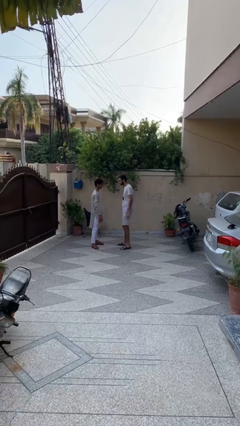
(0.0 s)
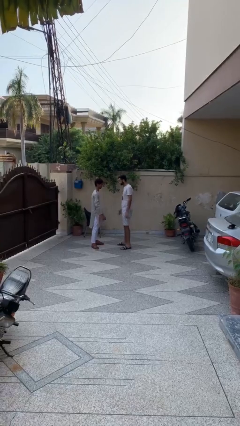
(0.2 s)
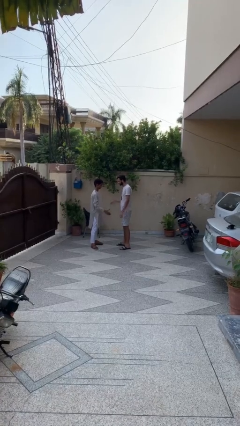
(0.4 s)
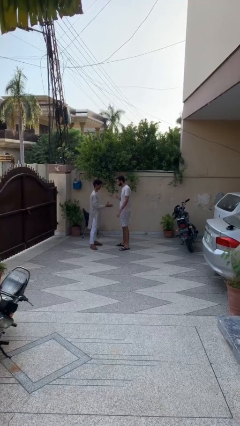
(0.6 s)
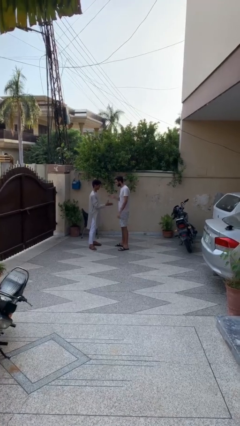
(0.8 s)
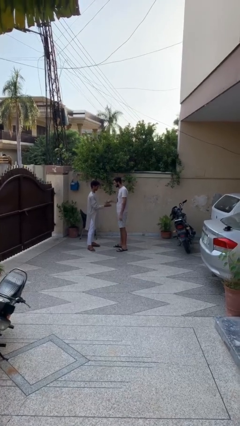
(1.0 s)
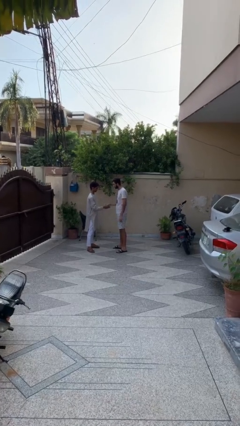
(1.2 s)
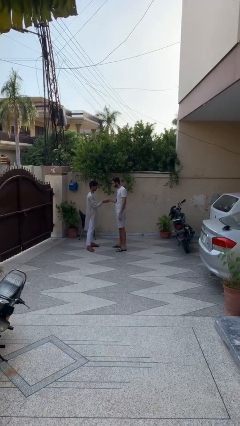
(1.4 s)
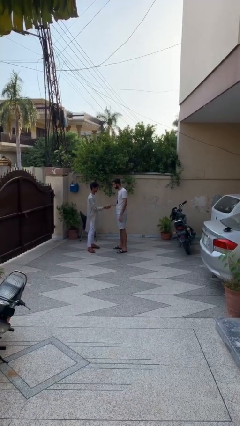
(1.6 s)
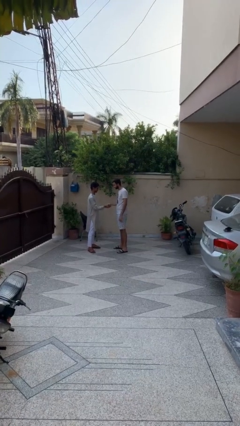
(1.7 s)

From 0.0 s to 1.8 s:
person shakes hand

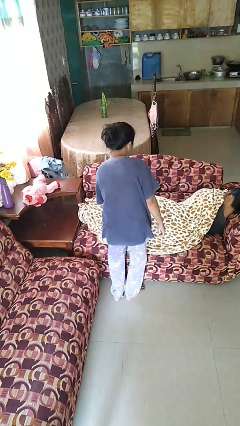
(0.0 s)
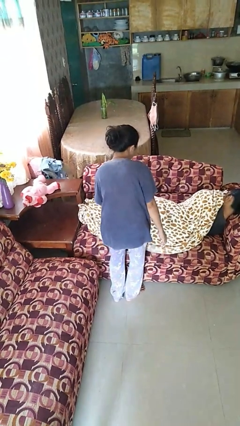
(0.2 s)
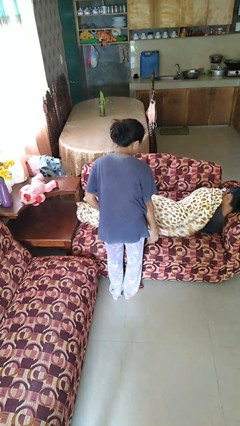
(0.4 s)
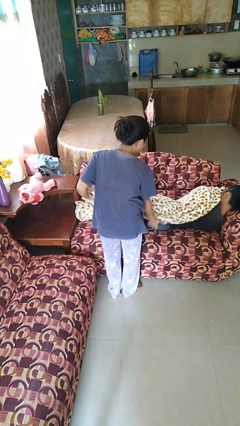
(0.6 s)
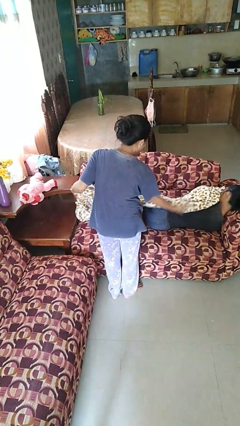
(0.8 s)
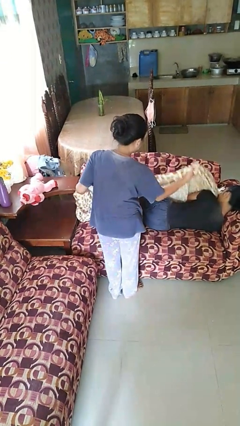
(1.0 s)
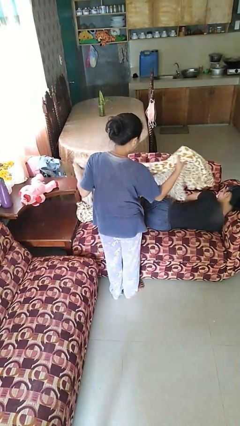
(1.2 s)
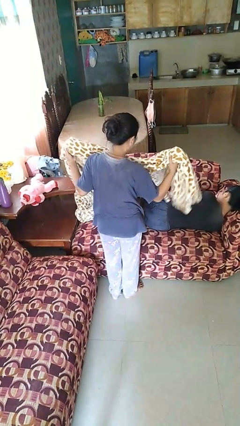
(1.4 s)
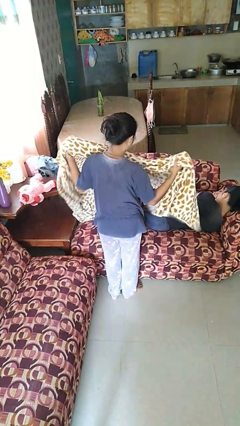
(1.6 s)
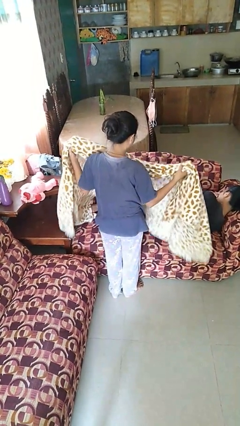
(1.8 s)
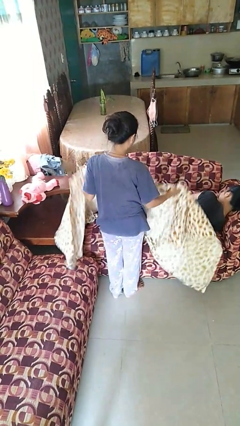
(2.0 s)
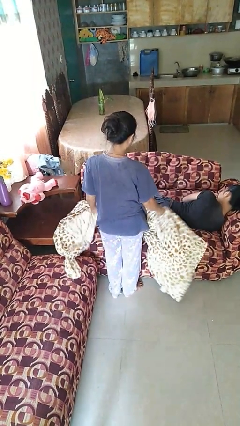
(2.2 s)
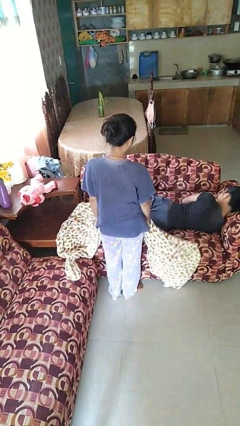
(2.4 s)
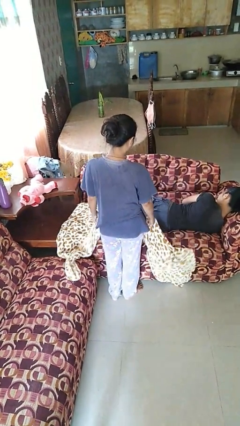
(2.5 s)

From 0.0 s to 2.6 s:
person uncovers friend with blanket

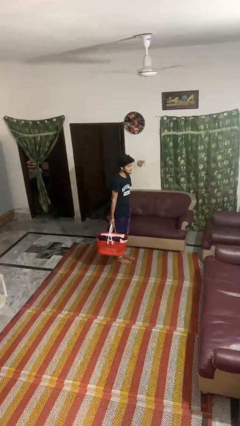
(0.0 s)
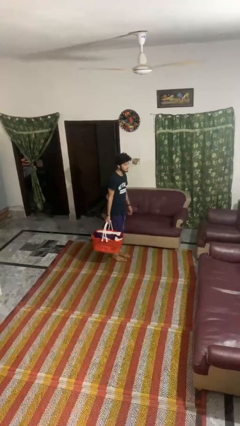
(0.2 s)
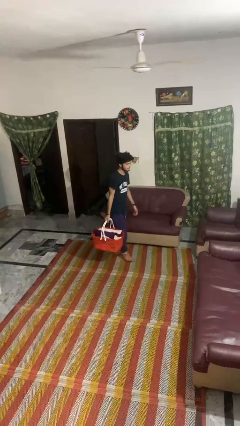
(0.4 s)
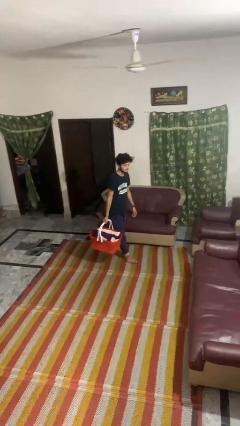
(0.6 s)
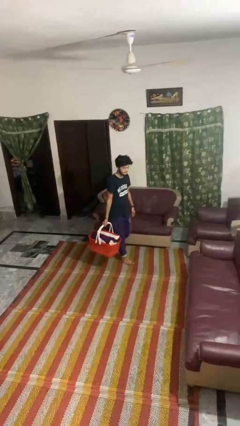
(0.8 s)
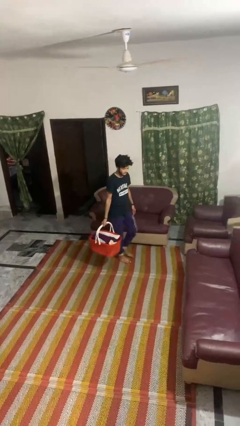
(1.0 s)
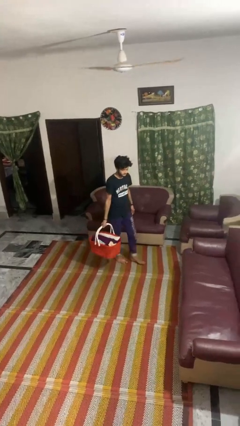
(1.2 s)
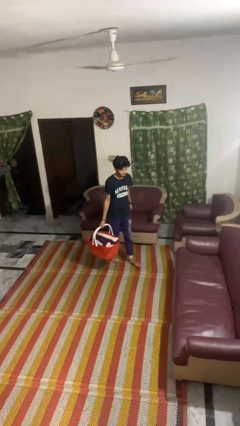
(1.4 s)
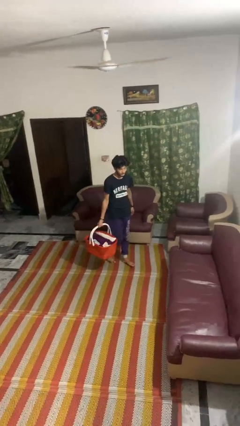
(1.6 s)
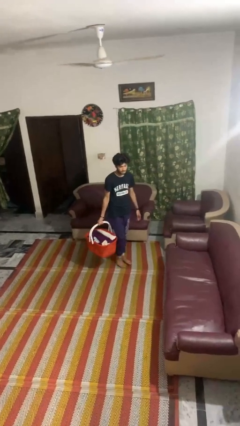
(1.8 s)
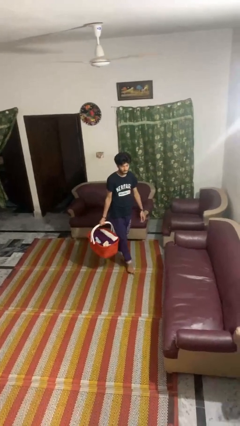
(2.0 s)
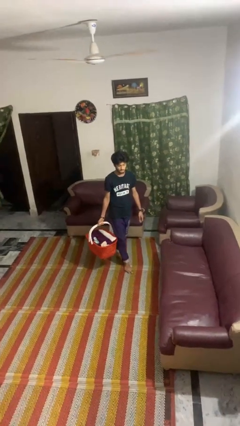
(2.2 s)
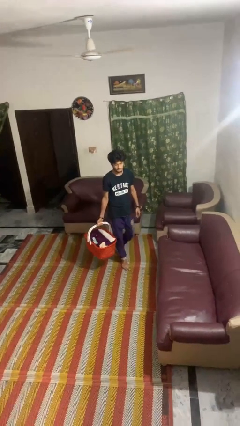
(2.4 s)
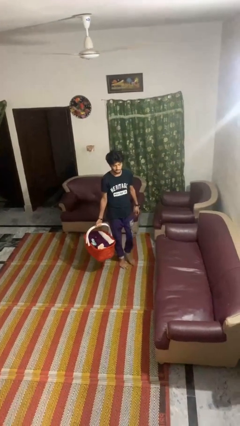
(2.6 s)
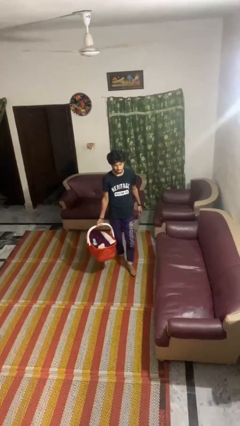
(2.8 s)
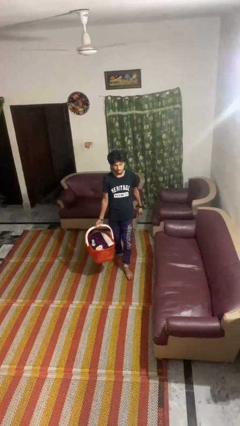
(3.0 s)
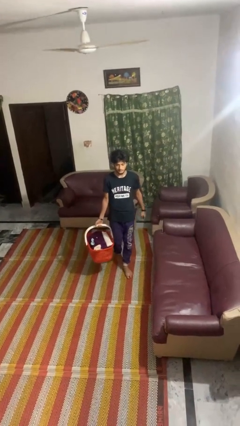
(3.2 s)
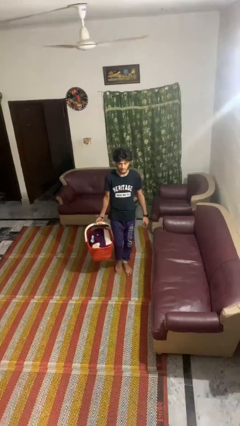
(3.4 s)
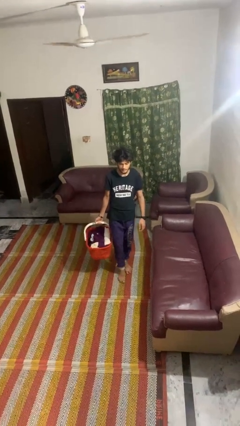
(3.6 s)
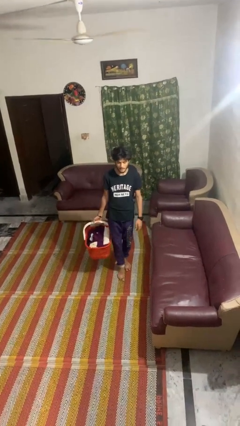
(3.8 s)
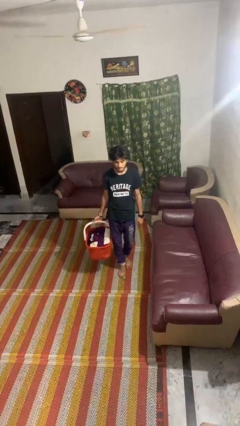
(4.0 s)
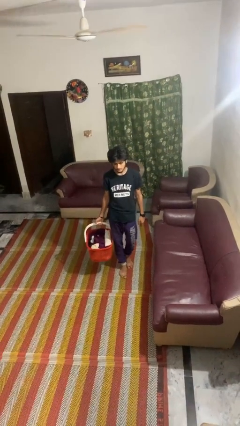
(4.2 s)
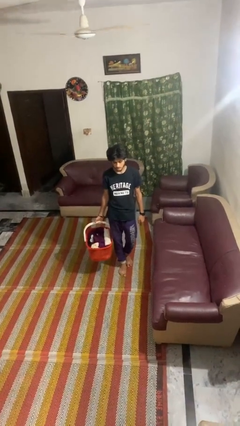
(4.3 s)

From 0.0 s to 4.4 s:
person carries laundry basket

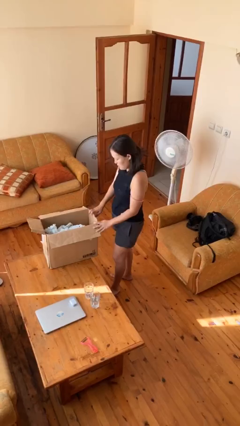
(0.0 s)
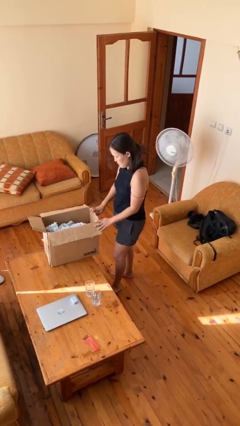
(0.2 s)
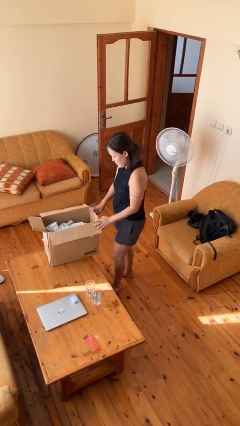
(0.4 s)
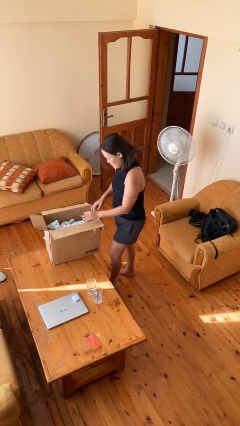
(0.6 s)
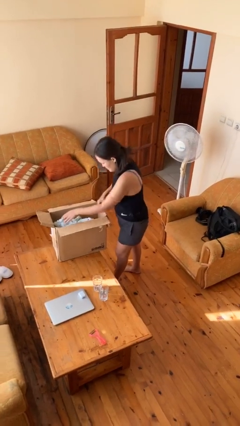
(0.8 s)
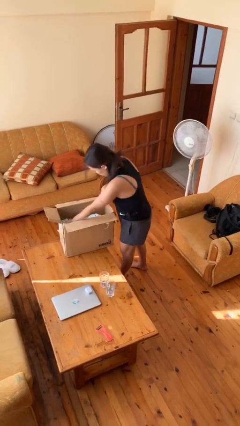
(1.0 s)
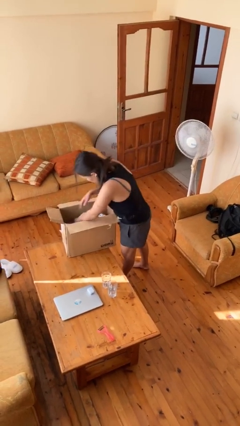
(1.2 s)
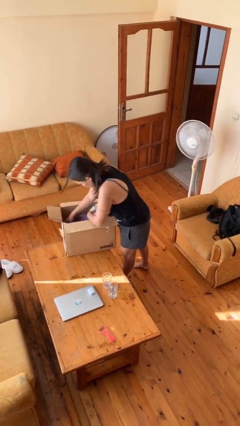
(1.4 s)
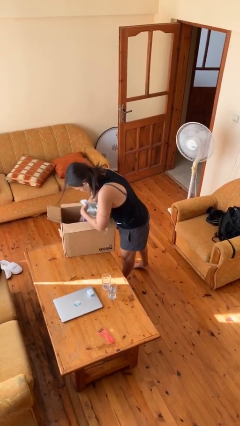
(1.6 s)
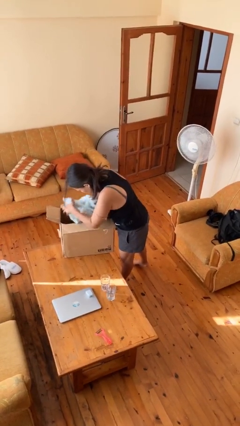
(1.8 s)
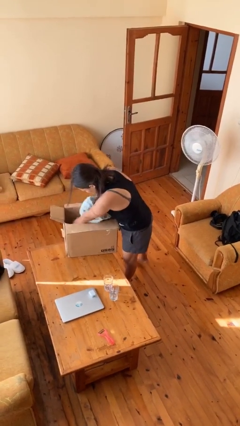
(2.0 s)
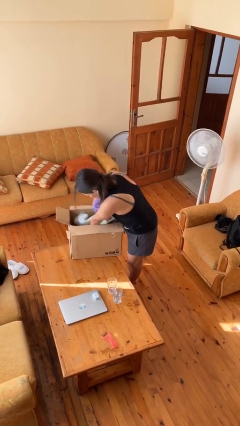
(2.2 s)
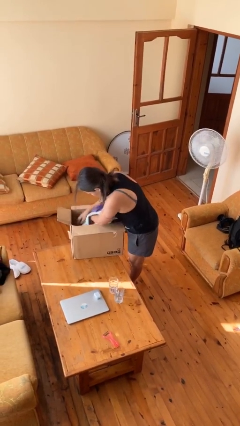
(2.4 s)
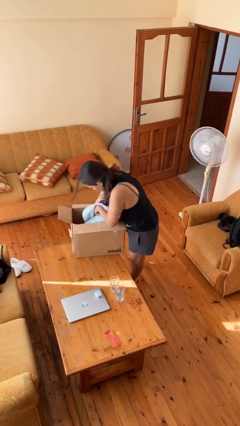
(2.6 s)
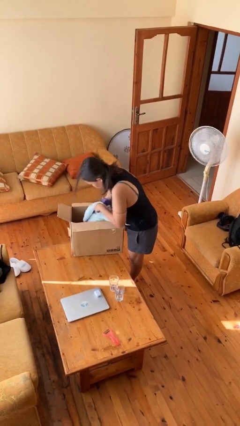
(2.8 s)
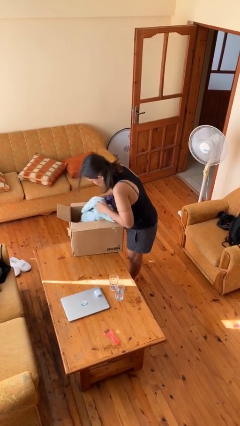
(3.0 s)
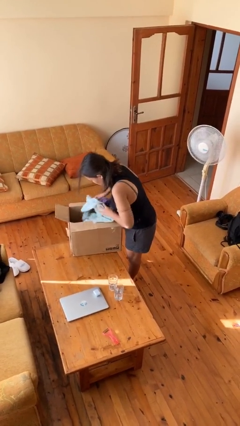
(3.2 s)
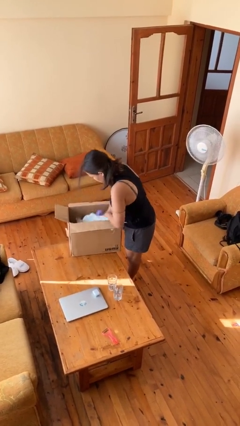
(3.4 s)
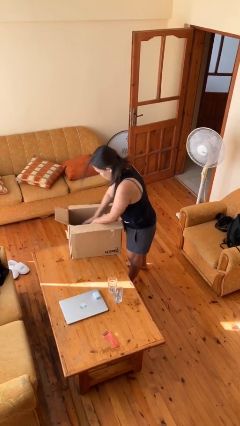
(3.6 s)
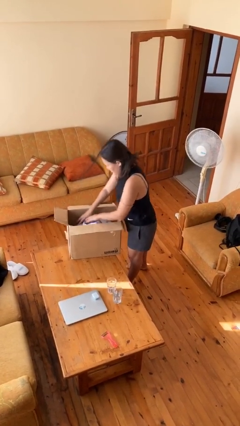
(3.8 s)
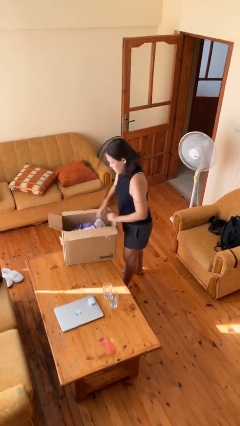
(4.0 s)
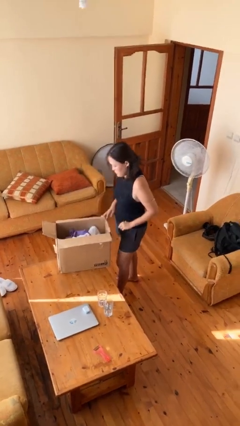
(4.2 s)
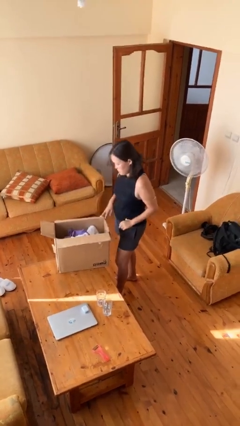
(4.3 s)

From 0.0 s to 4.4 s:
person searches in box

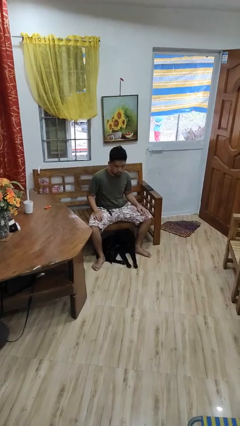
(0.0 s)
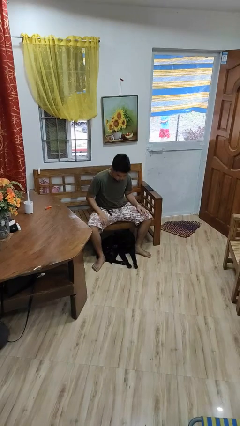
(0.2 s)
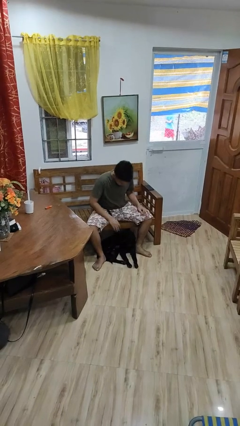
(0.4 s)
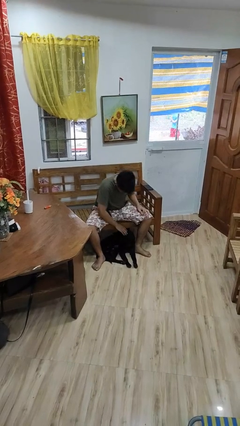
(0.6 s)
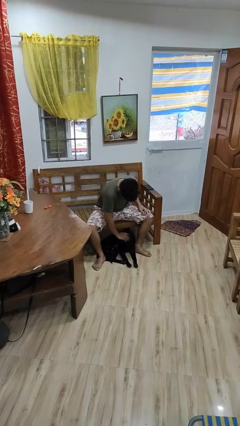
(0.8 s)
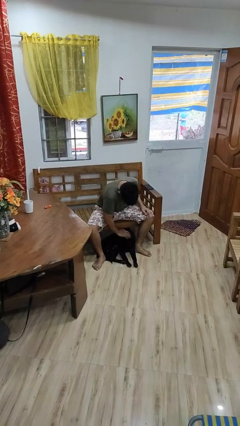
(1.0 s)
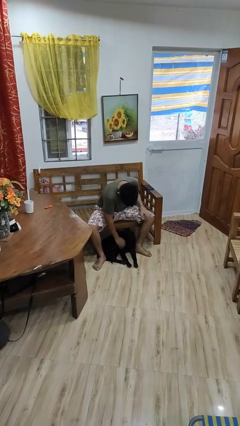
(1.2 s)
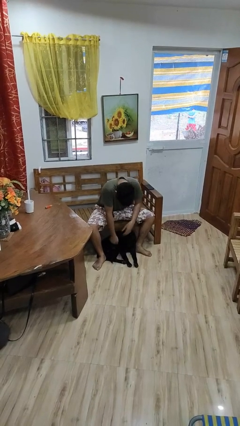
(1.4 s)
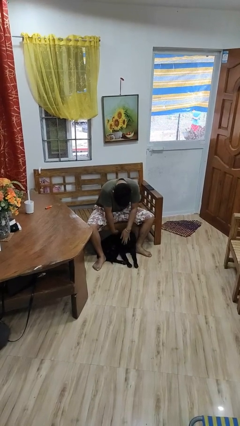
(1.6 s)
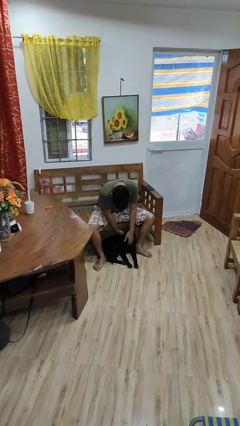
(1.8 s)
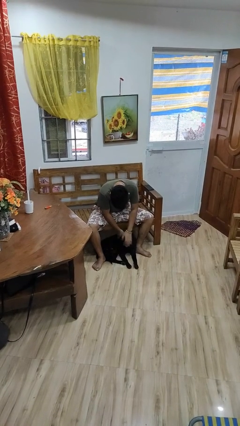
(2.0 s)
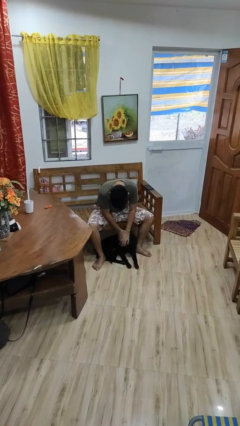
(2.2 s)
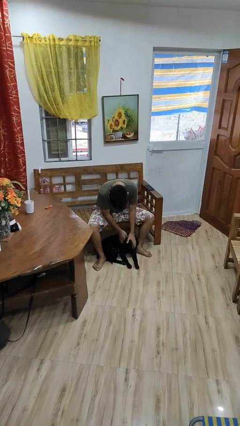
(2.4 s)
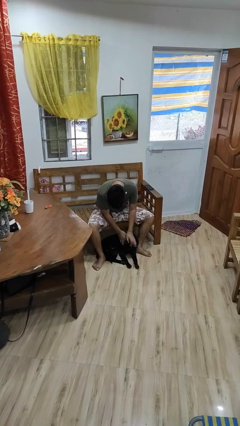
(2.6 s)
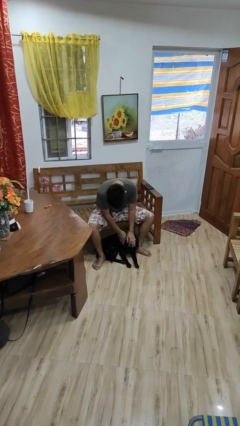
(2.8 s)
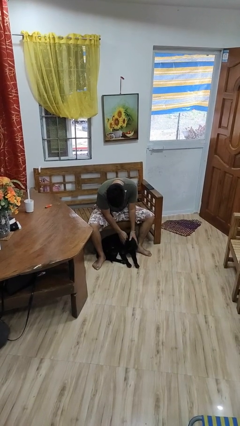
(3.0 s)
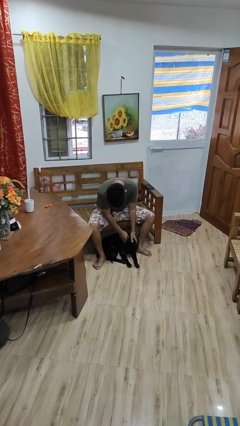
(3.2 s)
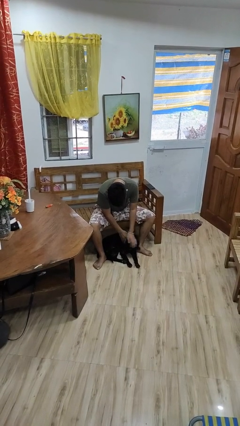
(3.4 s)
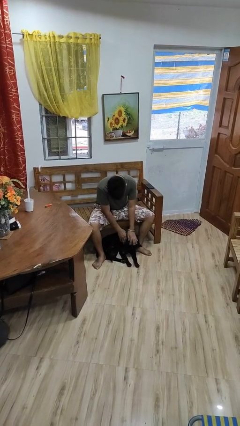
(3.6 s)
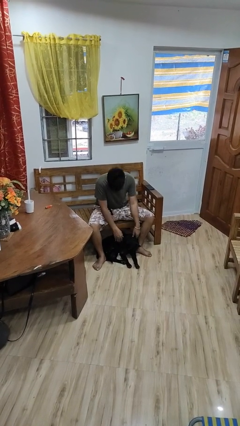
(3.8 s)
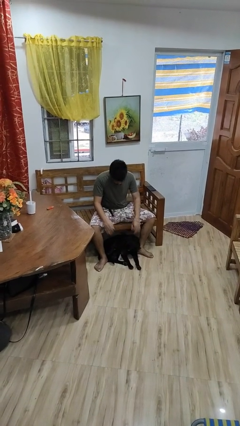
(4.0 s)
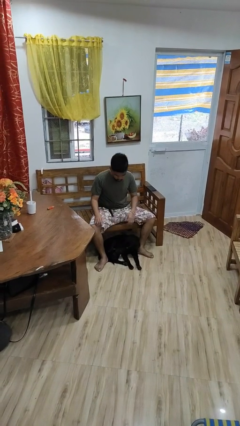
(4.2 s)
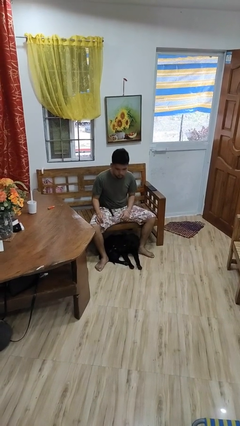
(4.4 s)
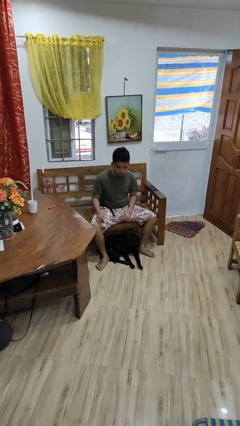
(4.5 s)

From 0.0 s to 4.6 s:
person pets dog
